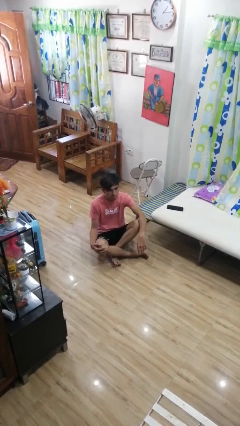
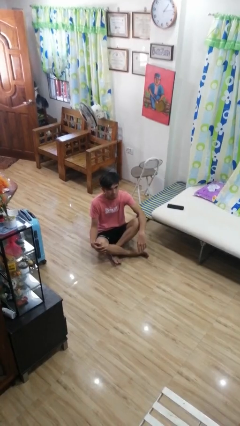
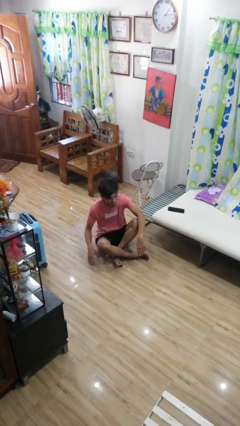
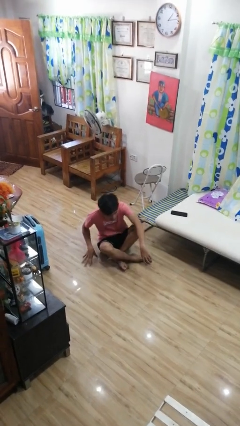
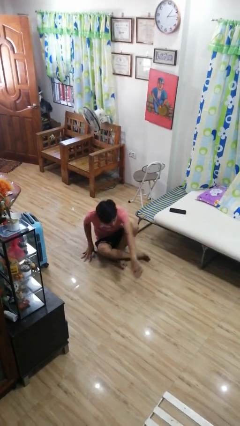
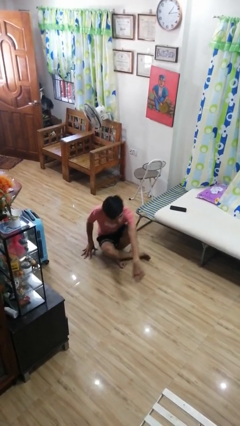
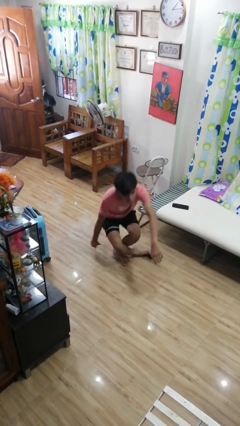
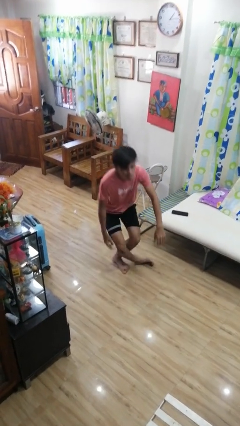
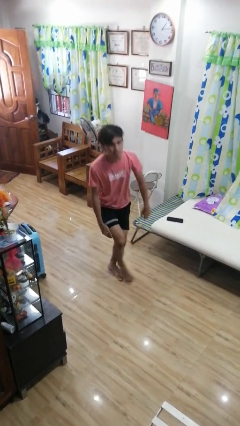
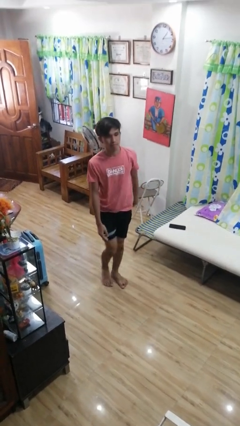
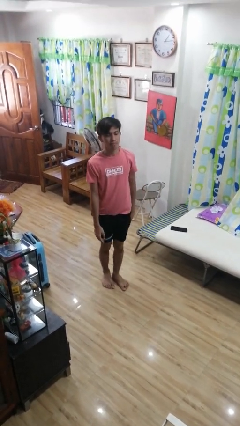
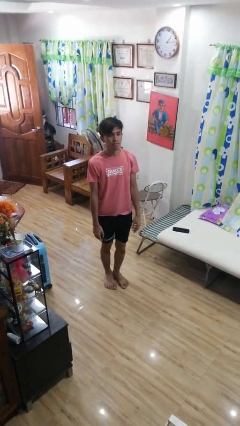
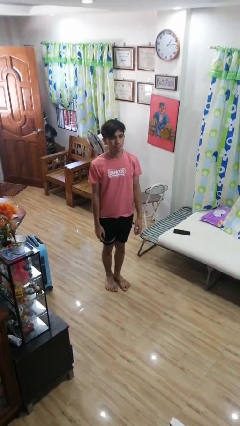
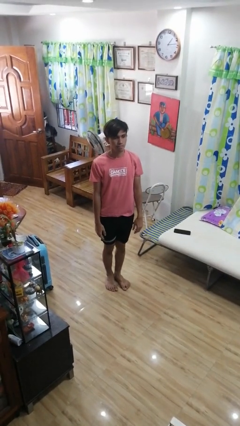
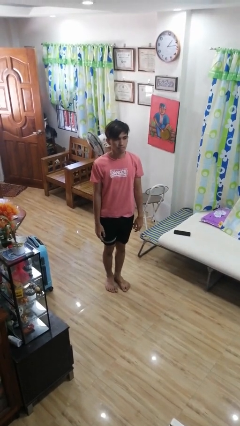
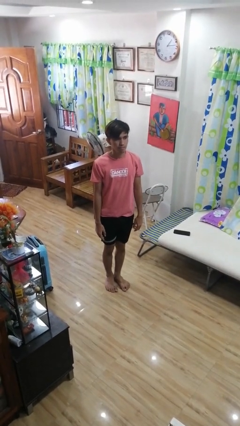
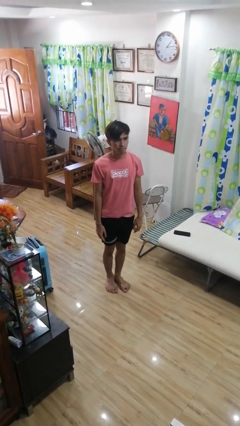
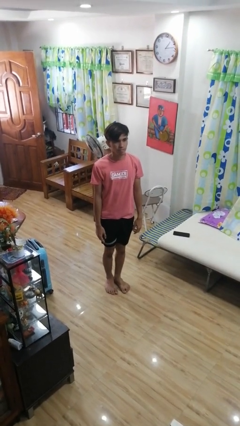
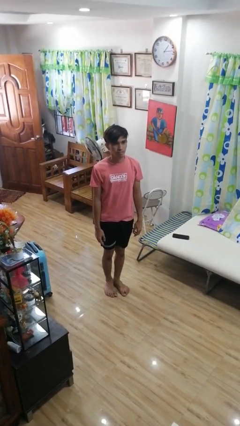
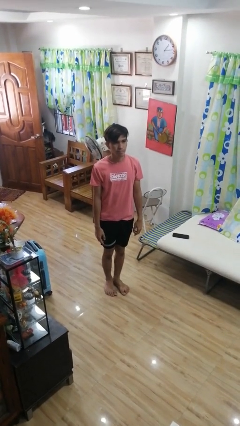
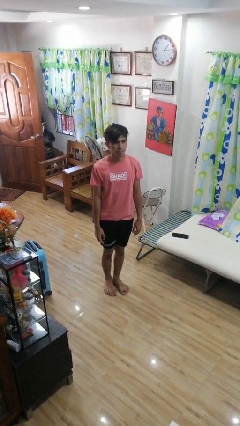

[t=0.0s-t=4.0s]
person stands up from floor

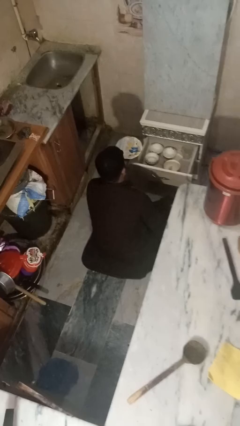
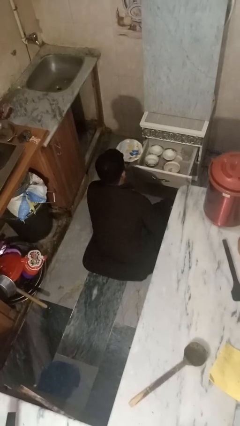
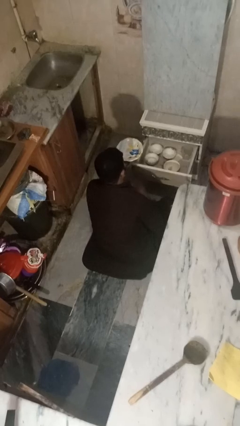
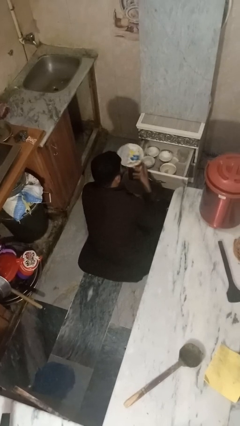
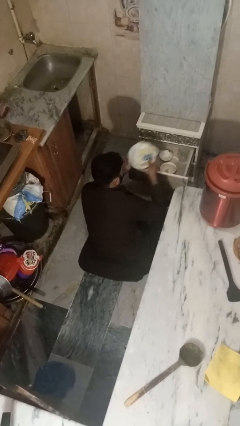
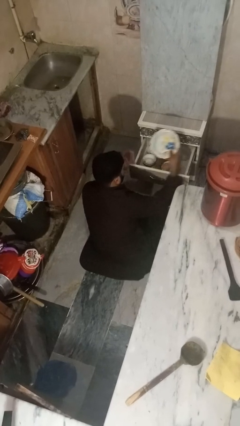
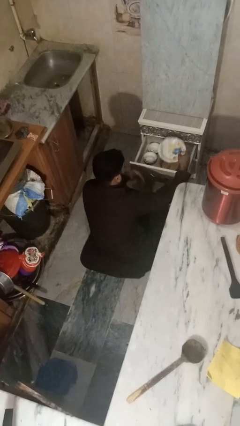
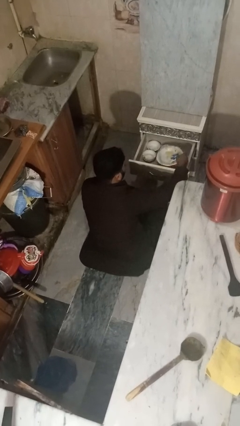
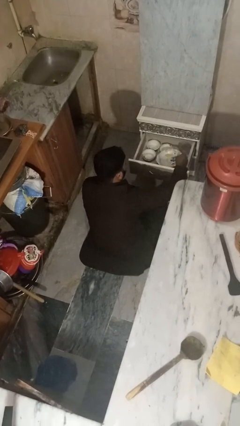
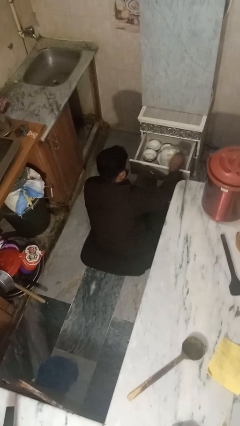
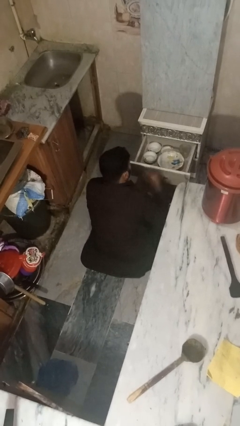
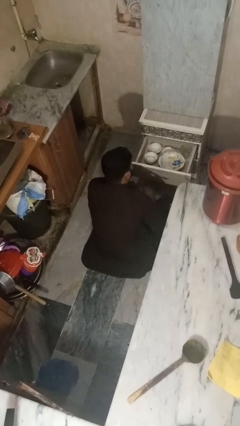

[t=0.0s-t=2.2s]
person puts object into kitchen drawer

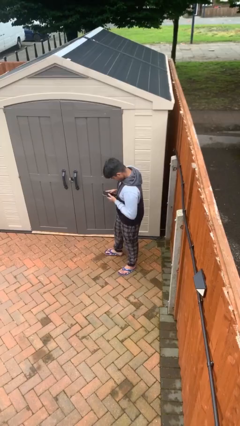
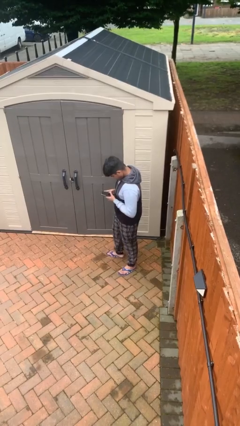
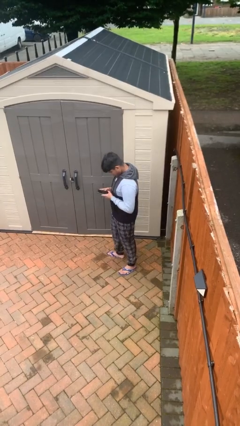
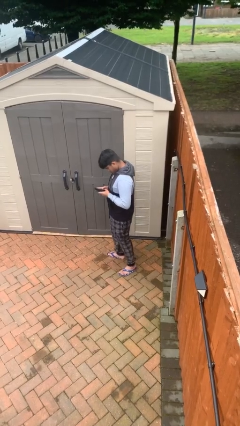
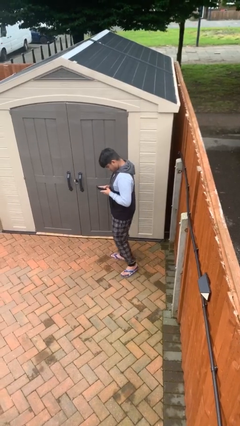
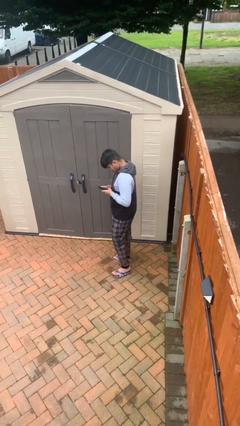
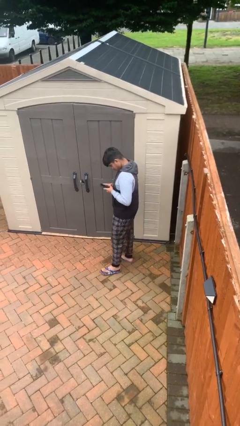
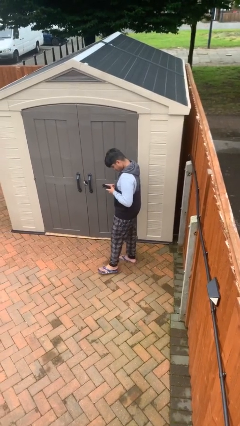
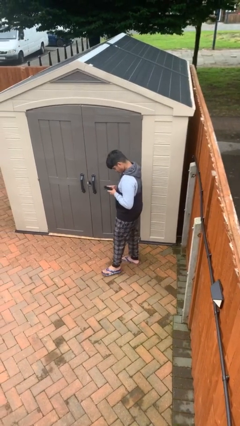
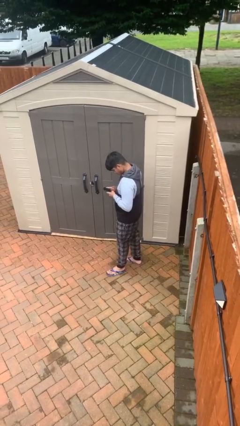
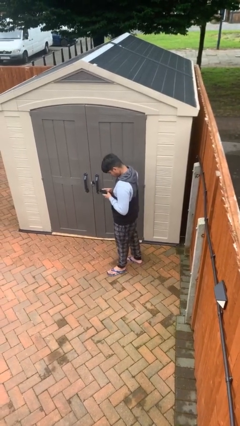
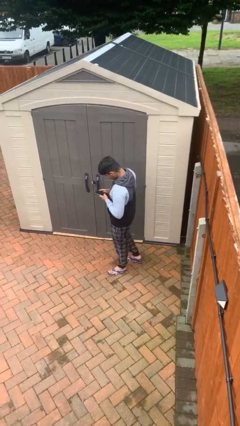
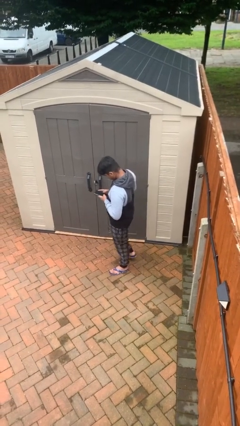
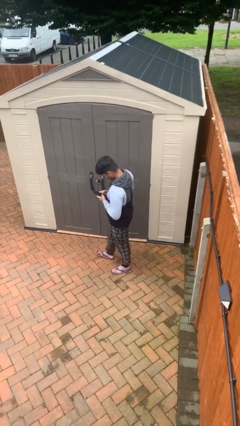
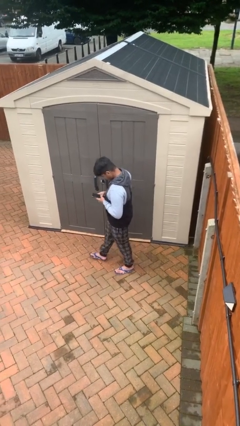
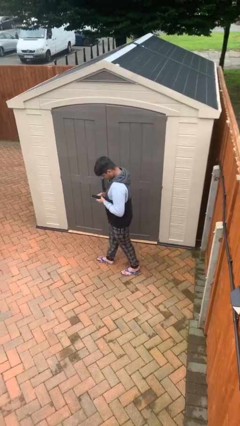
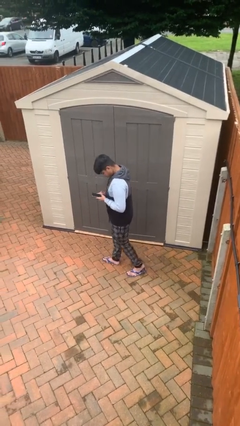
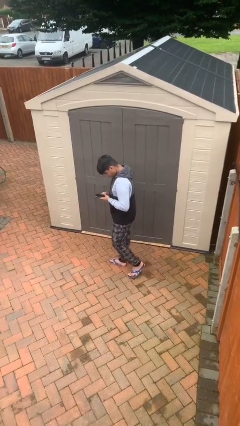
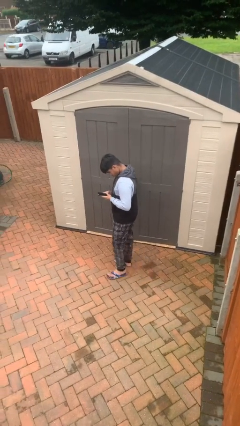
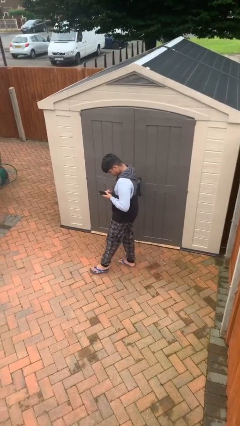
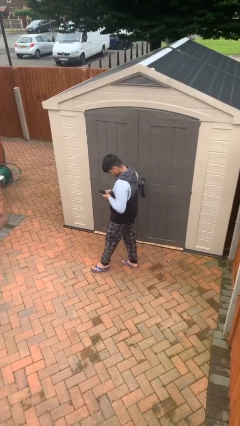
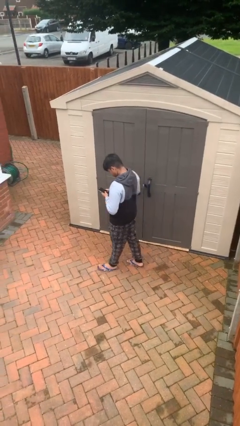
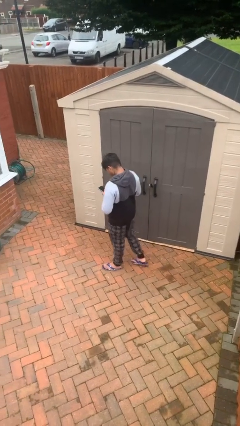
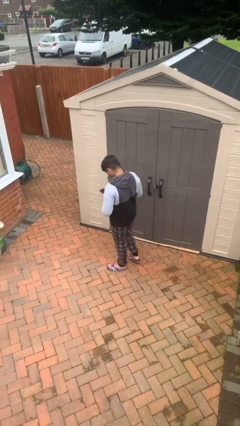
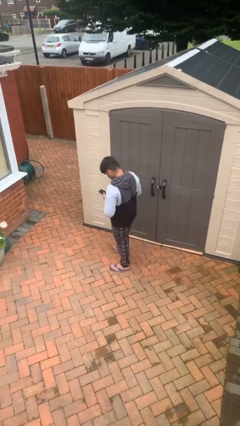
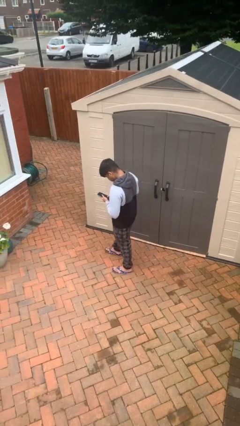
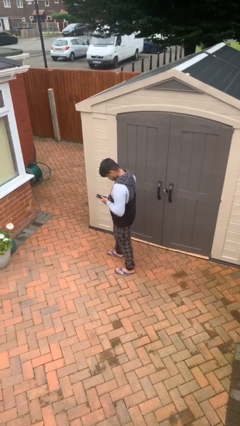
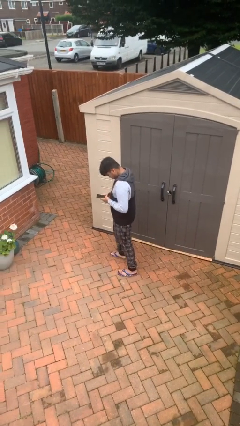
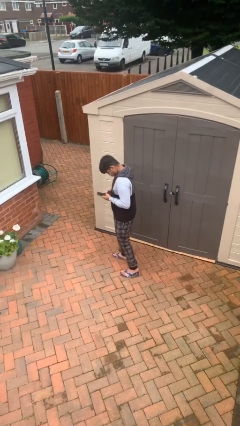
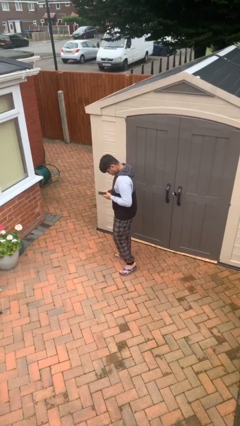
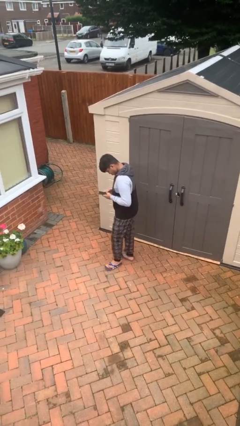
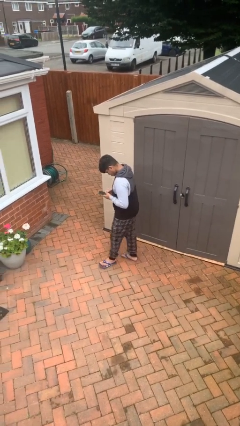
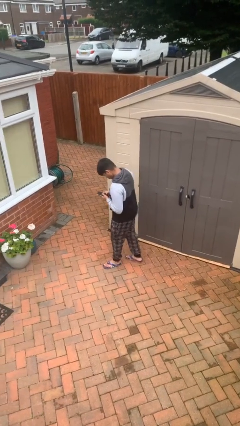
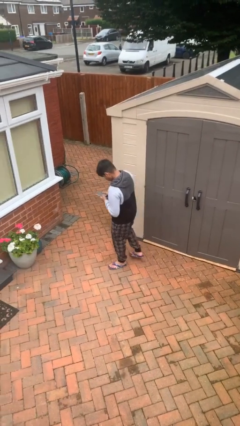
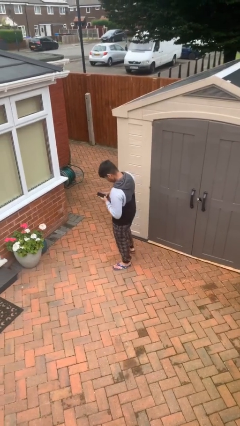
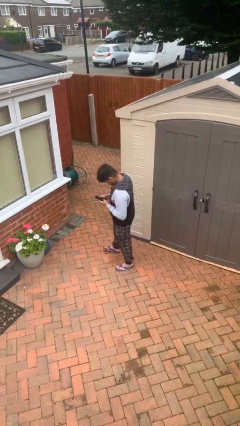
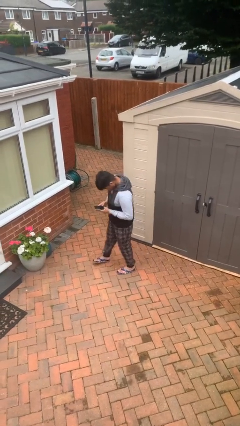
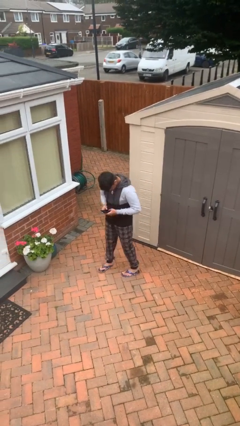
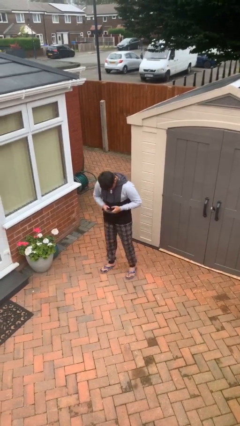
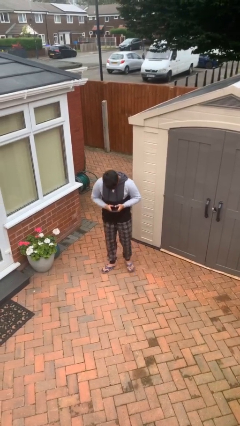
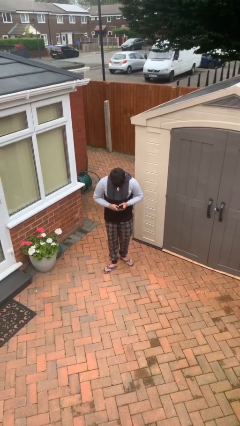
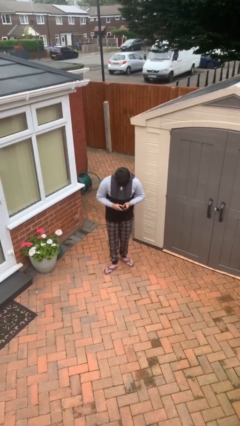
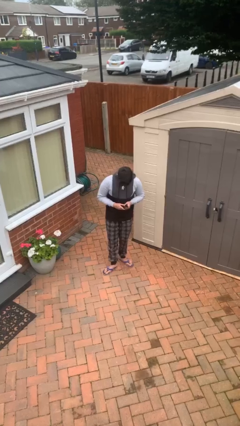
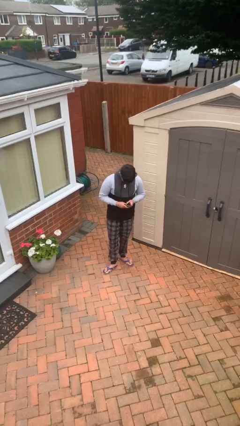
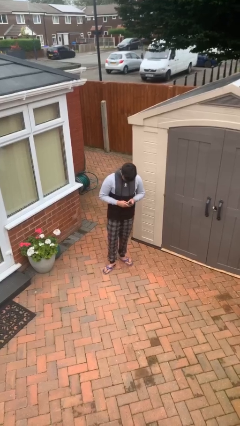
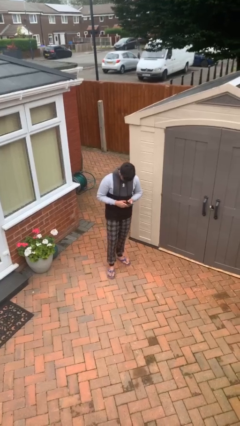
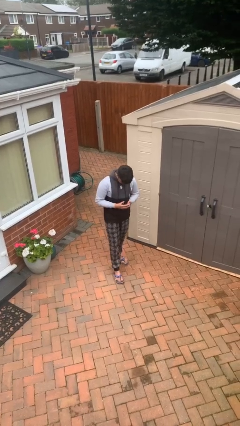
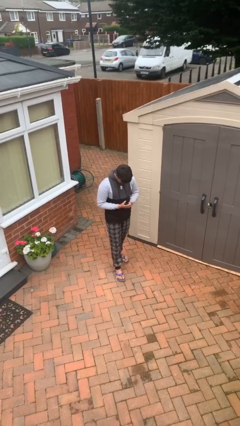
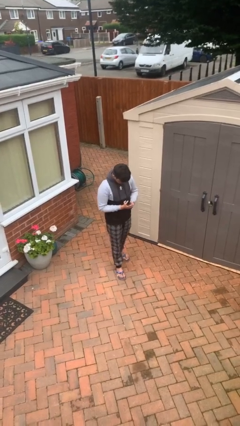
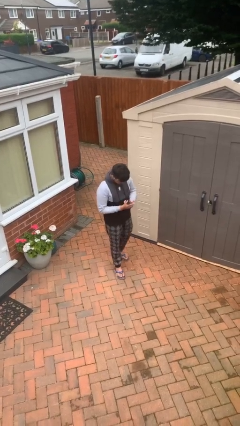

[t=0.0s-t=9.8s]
person texts on phone

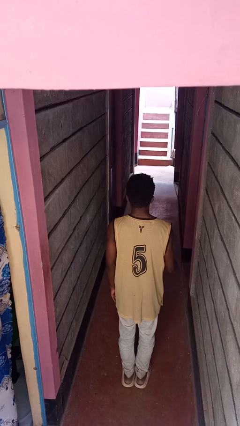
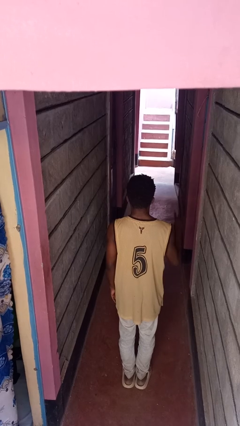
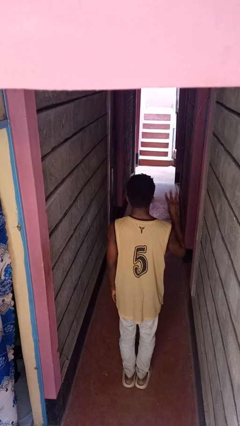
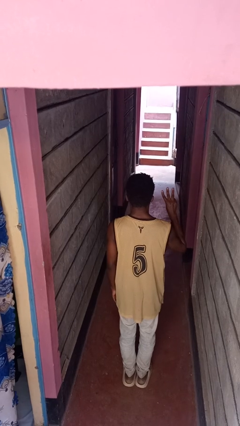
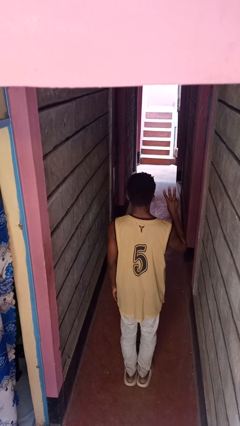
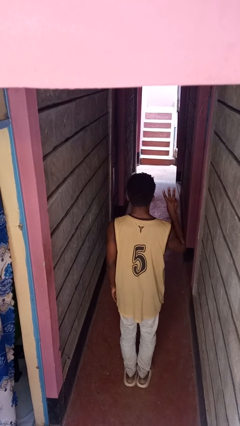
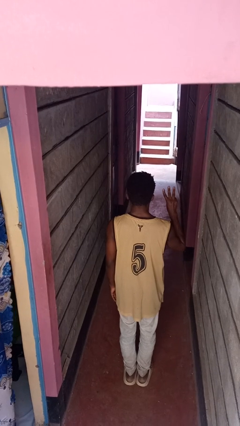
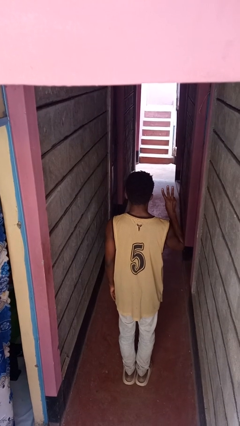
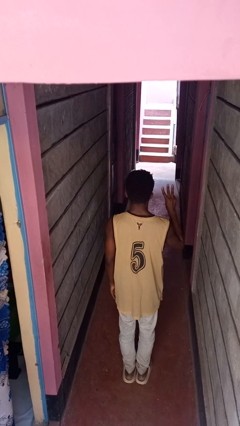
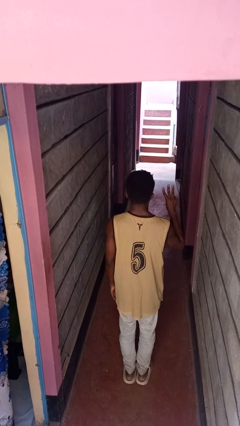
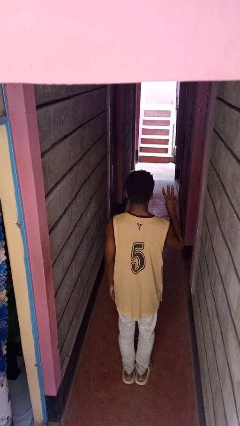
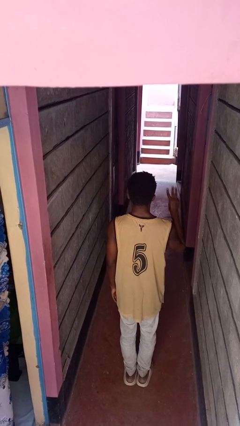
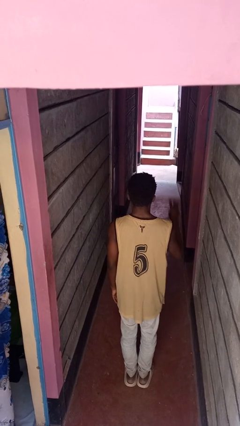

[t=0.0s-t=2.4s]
person gestures number three
